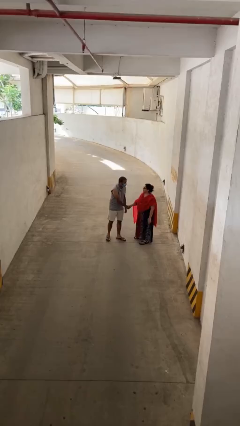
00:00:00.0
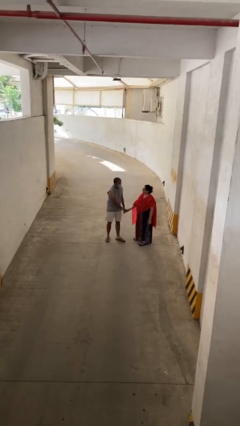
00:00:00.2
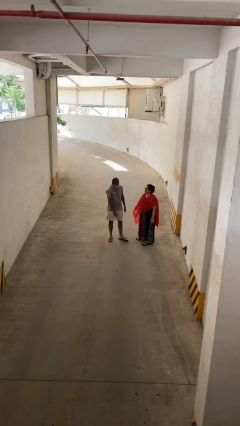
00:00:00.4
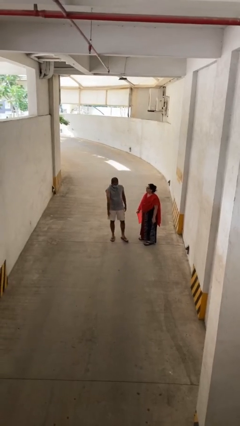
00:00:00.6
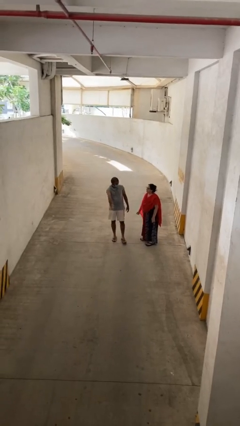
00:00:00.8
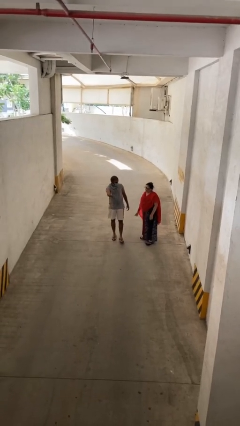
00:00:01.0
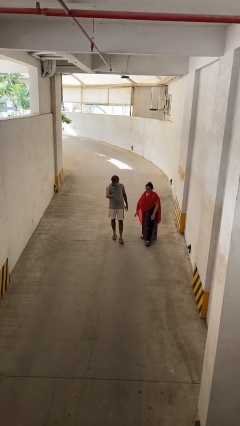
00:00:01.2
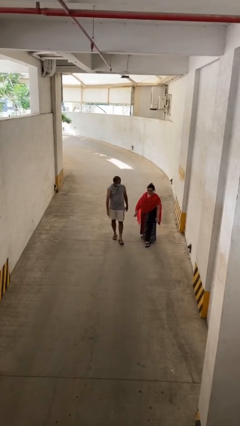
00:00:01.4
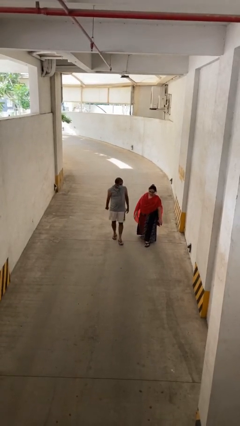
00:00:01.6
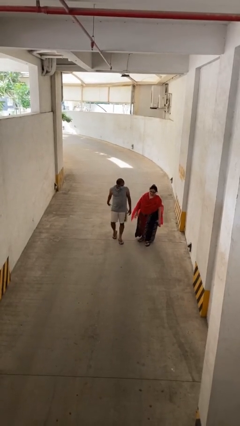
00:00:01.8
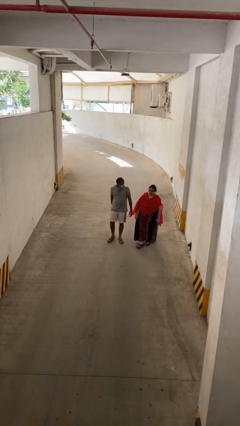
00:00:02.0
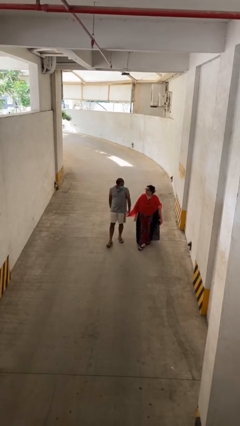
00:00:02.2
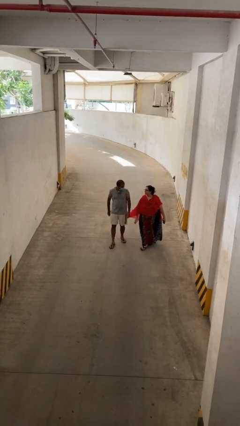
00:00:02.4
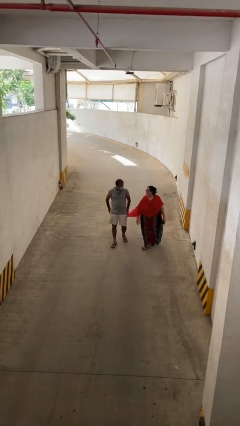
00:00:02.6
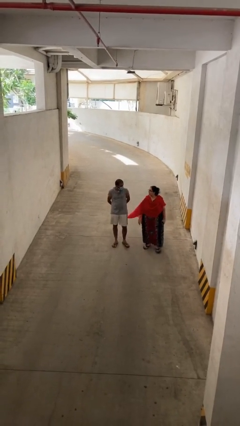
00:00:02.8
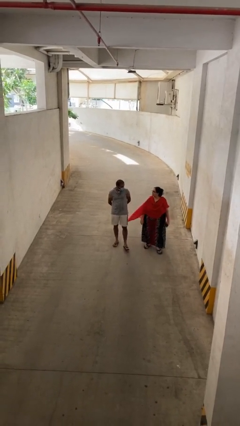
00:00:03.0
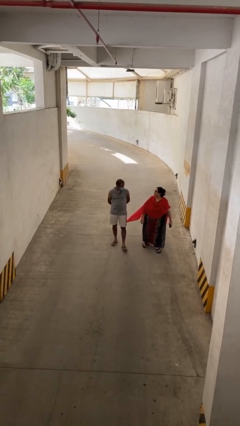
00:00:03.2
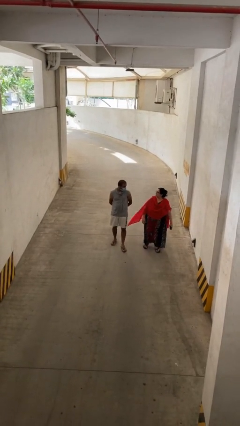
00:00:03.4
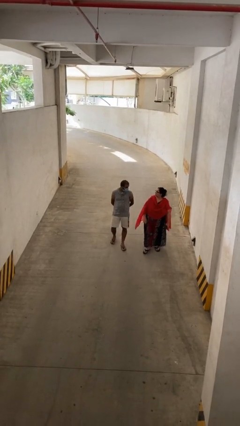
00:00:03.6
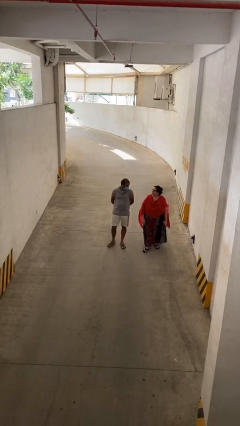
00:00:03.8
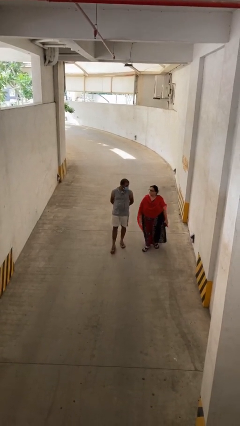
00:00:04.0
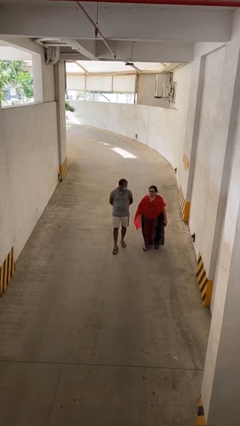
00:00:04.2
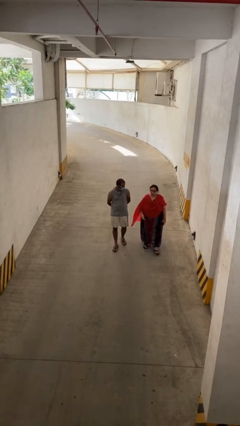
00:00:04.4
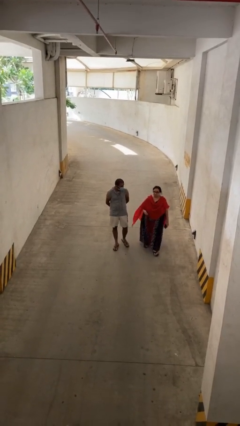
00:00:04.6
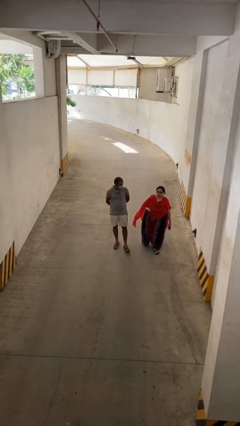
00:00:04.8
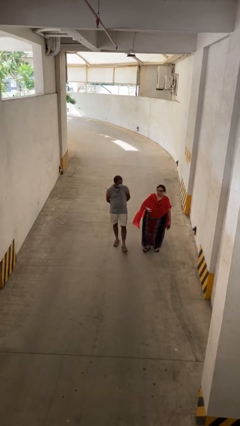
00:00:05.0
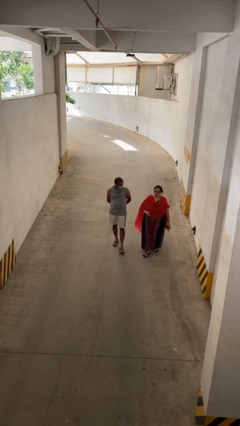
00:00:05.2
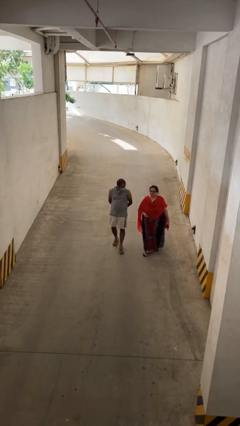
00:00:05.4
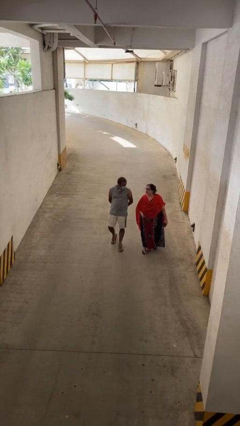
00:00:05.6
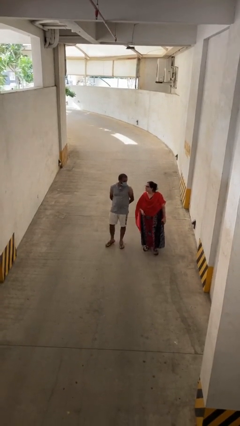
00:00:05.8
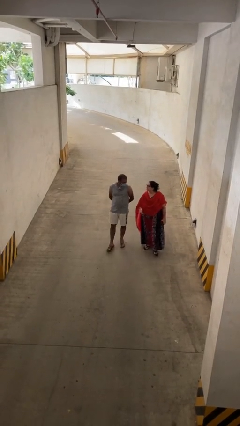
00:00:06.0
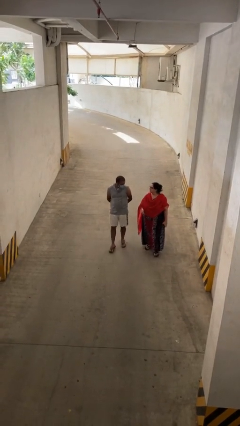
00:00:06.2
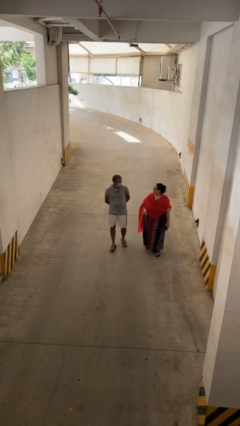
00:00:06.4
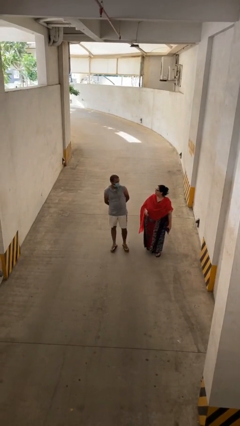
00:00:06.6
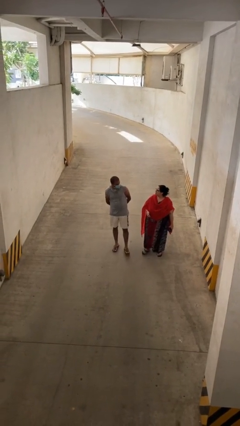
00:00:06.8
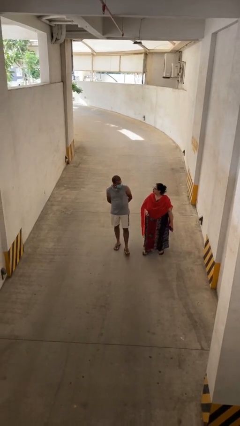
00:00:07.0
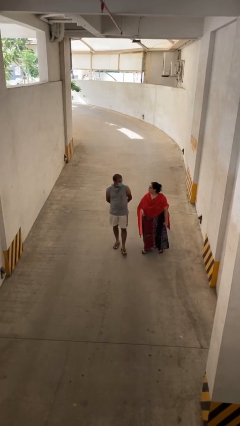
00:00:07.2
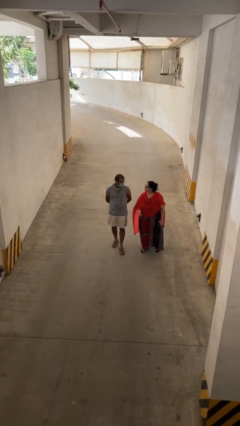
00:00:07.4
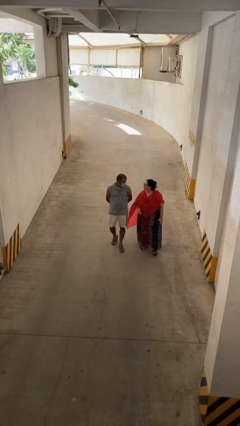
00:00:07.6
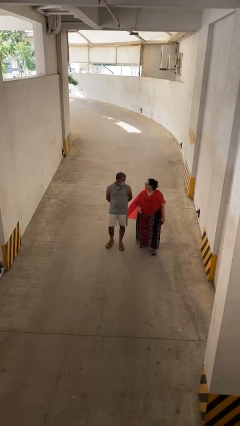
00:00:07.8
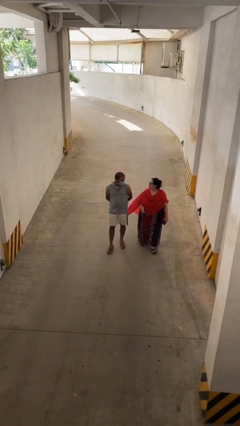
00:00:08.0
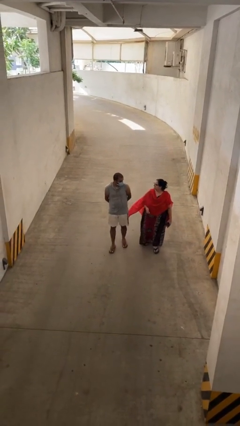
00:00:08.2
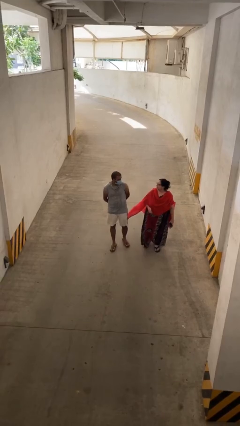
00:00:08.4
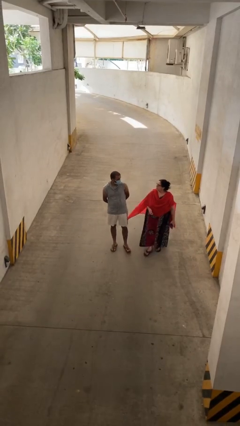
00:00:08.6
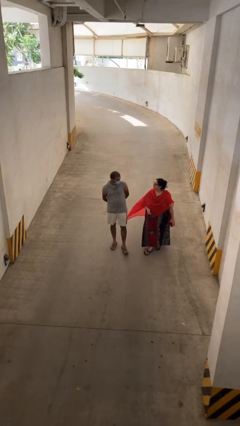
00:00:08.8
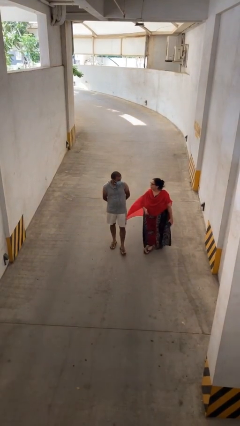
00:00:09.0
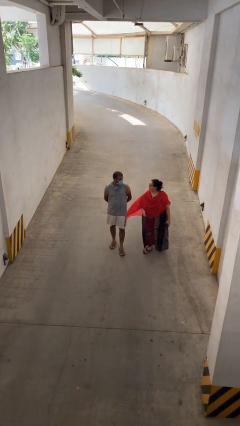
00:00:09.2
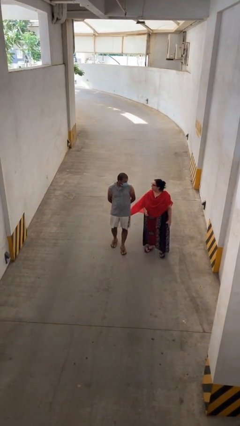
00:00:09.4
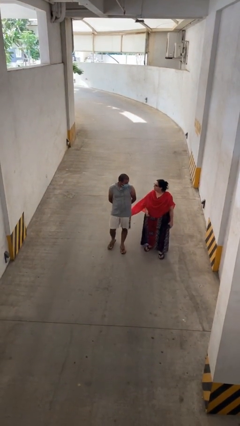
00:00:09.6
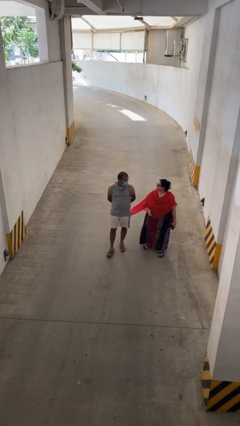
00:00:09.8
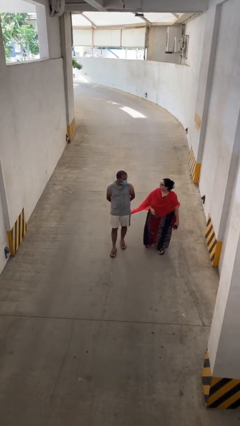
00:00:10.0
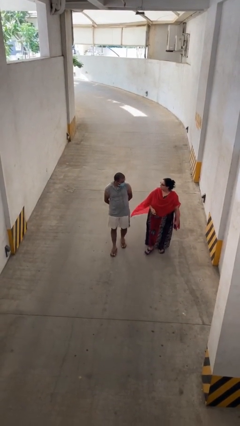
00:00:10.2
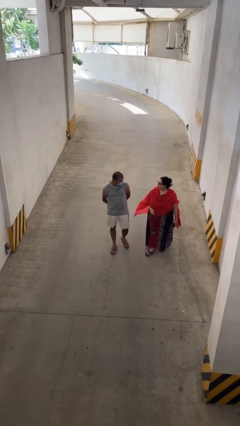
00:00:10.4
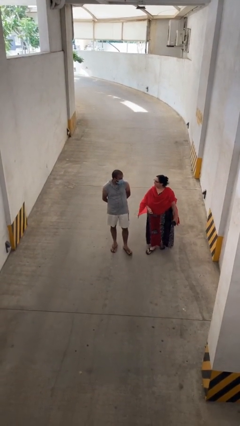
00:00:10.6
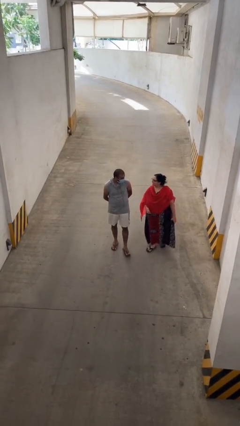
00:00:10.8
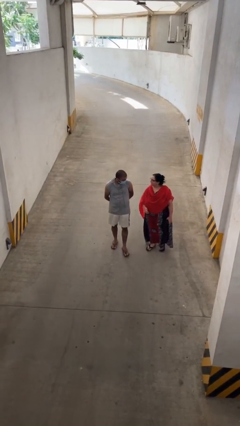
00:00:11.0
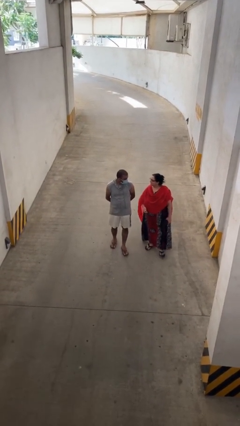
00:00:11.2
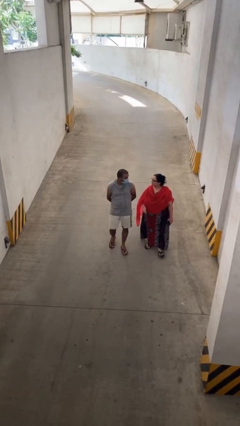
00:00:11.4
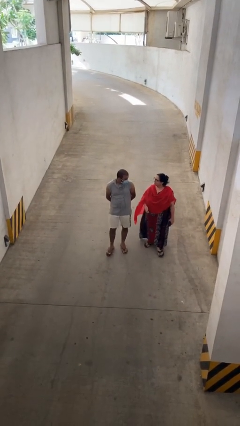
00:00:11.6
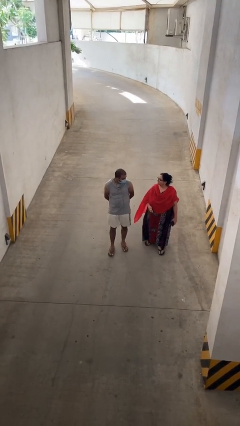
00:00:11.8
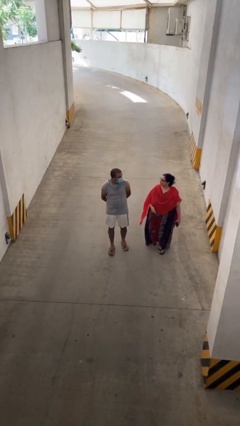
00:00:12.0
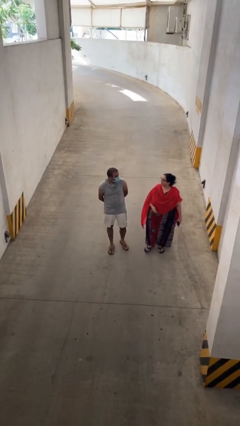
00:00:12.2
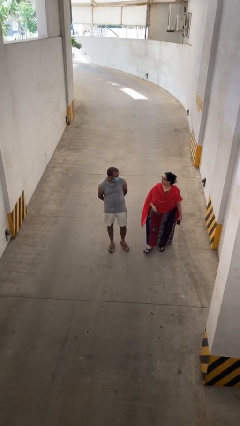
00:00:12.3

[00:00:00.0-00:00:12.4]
person talks to person

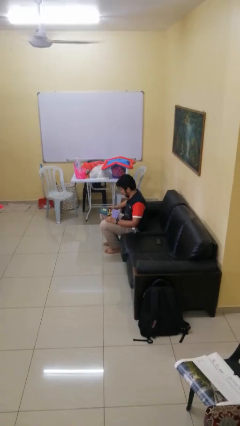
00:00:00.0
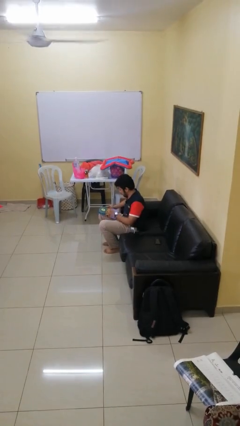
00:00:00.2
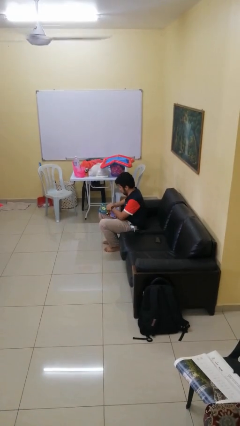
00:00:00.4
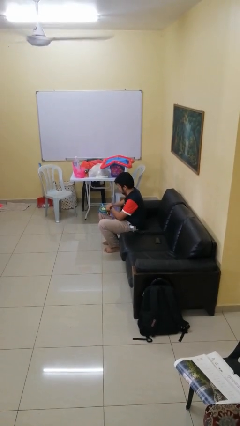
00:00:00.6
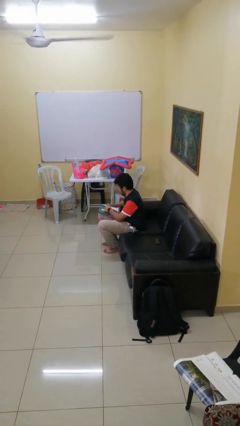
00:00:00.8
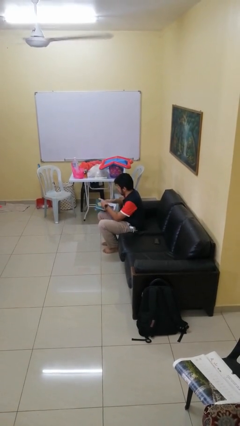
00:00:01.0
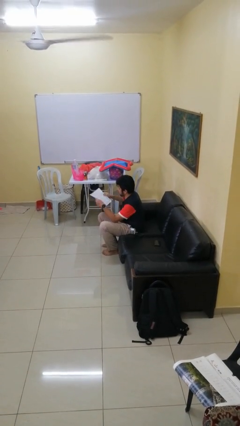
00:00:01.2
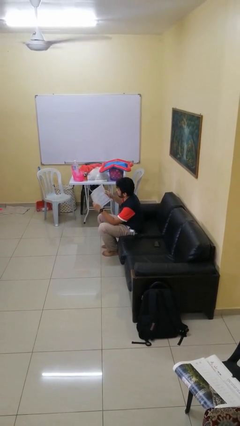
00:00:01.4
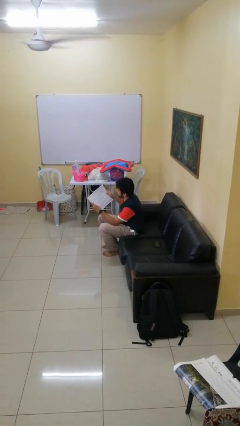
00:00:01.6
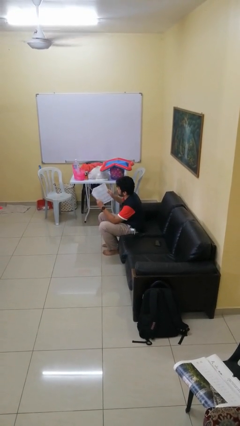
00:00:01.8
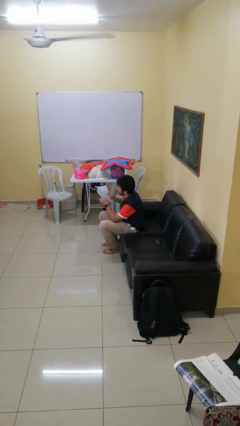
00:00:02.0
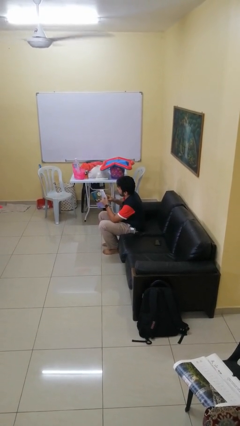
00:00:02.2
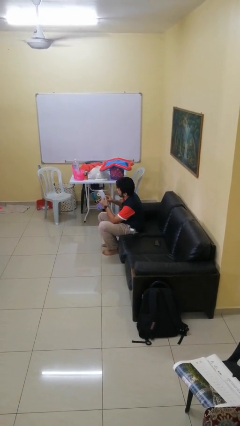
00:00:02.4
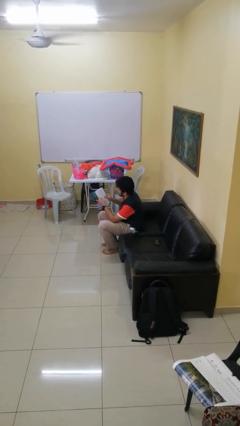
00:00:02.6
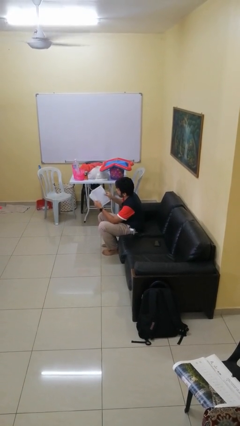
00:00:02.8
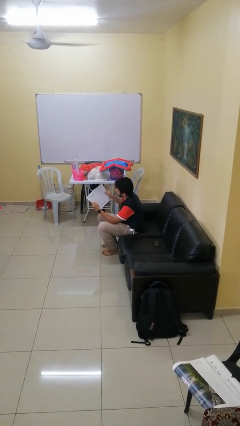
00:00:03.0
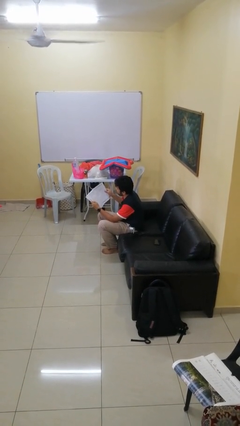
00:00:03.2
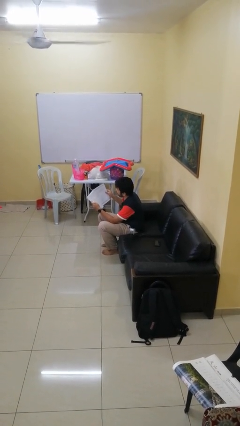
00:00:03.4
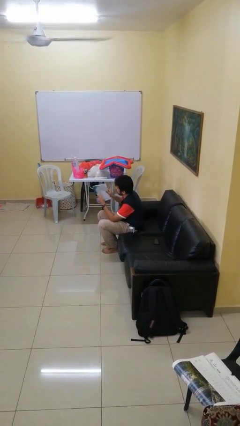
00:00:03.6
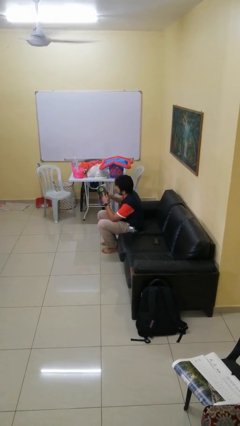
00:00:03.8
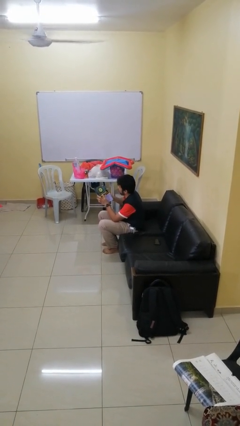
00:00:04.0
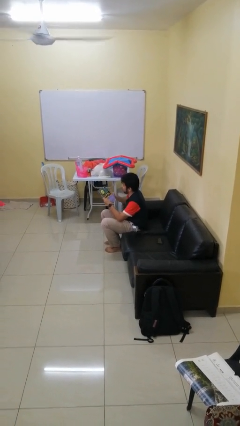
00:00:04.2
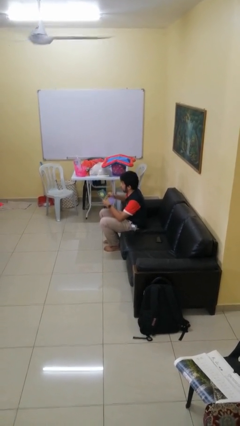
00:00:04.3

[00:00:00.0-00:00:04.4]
person reads magazine

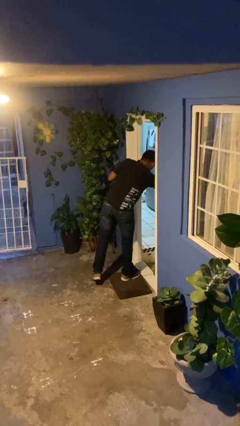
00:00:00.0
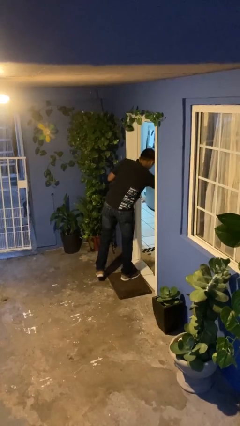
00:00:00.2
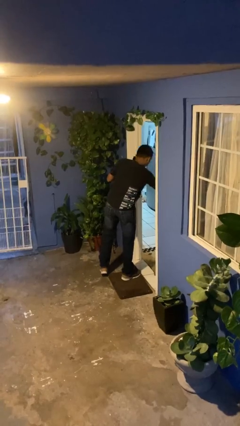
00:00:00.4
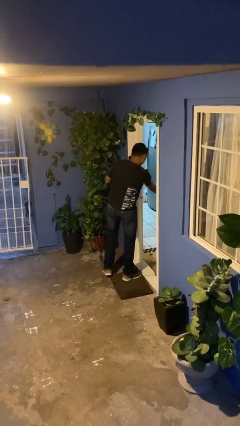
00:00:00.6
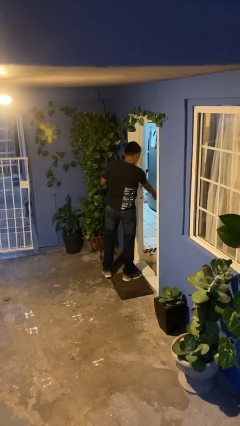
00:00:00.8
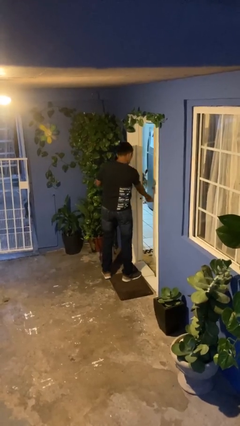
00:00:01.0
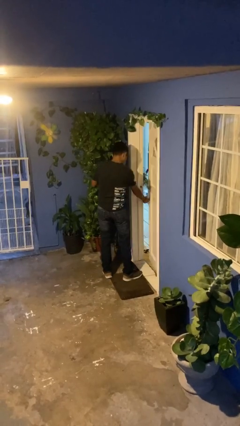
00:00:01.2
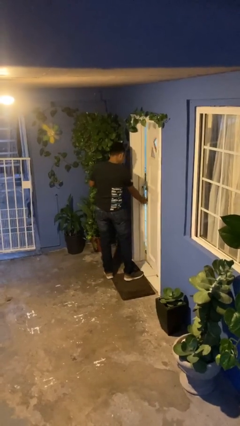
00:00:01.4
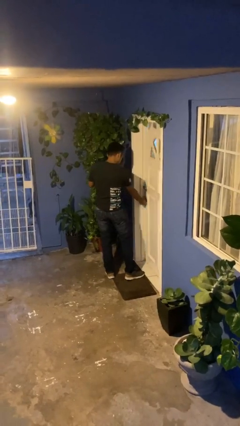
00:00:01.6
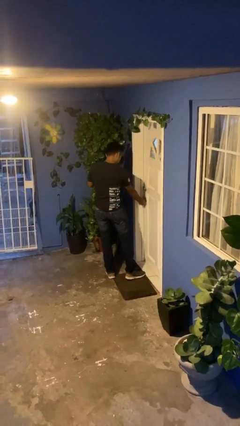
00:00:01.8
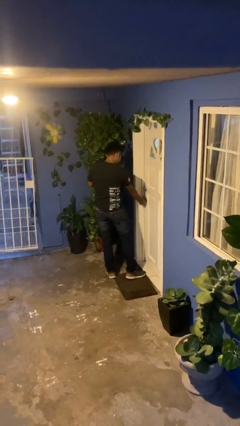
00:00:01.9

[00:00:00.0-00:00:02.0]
person closes facility door
